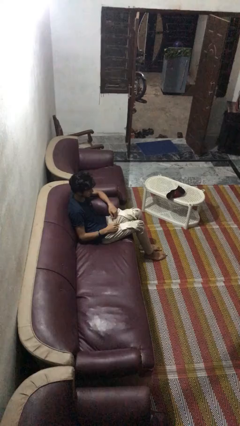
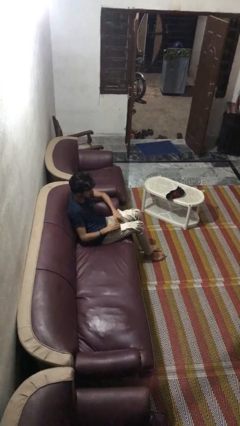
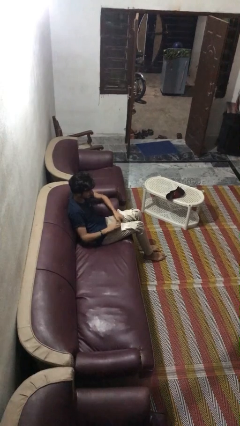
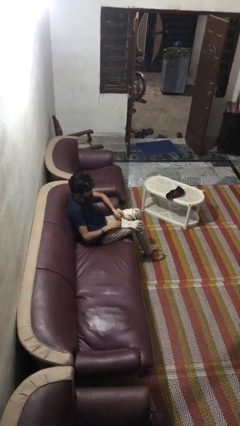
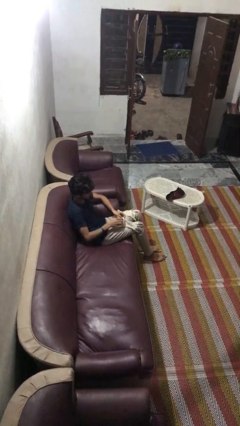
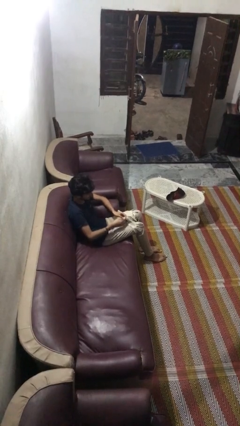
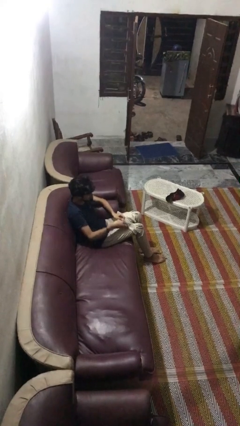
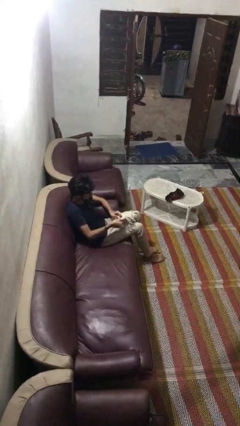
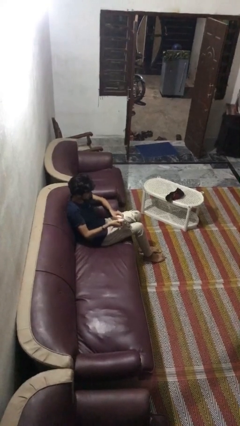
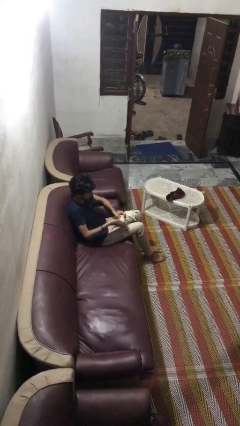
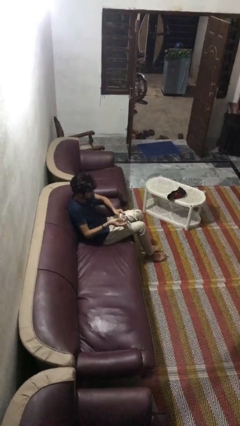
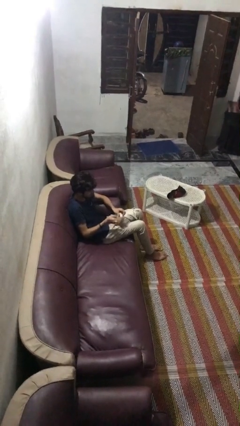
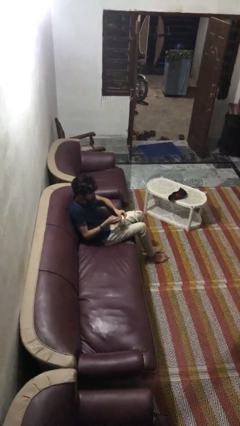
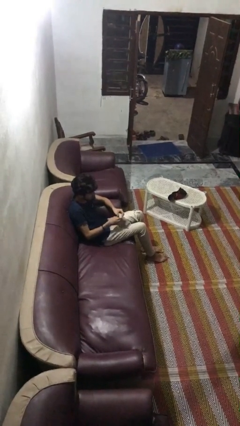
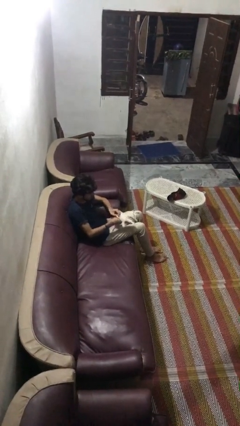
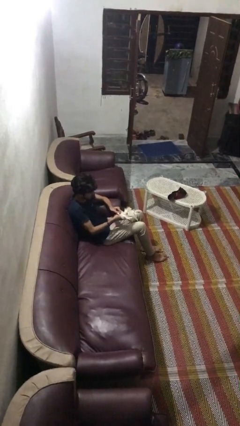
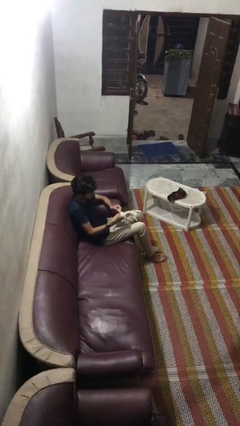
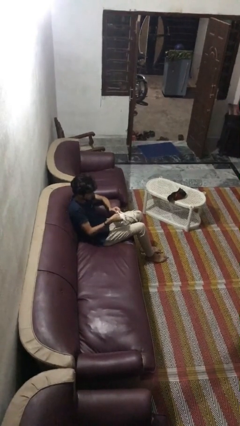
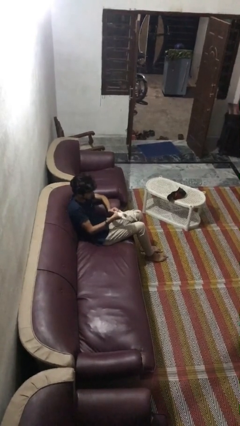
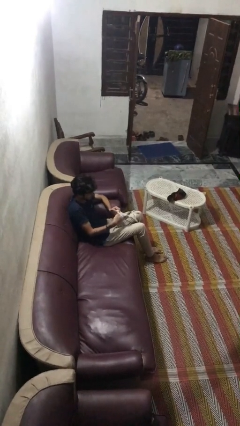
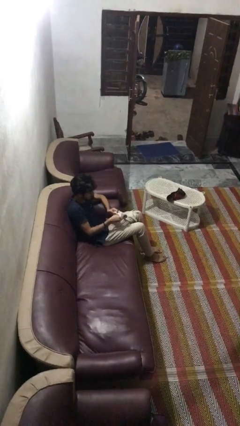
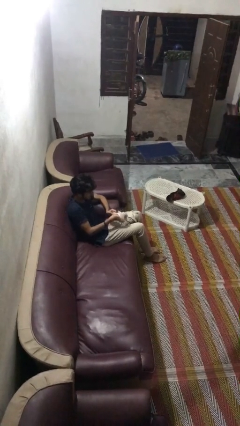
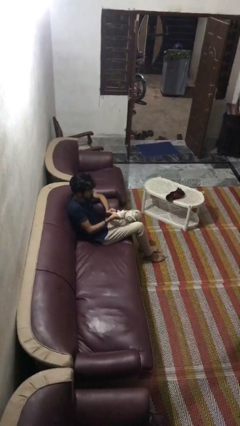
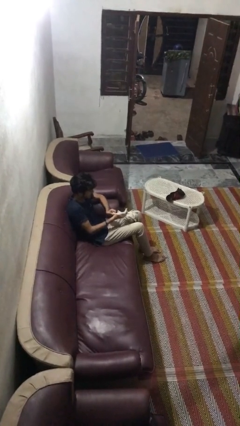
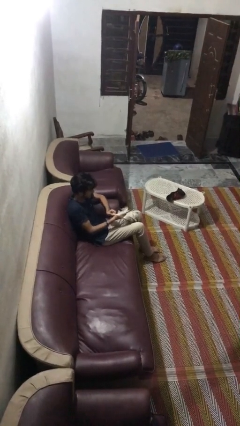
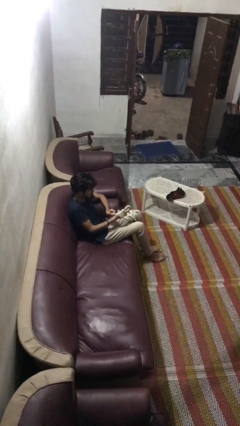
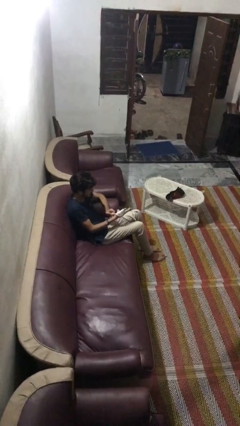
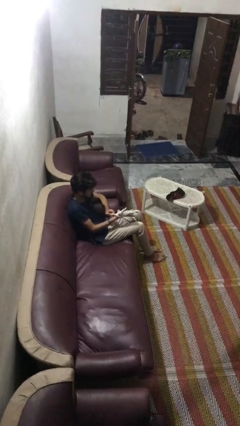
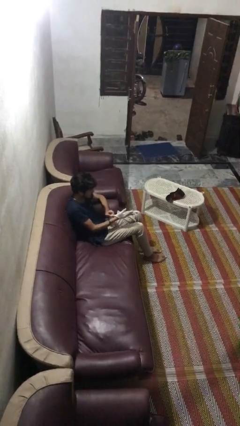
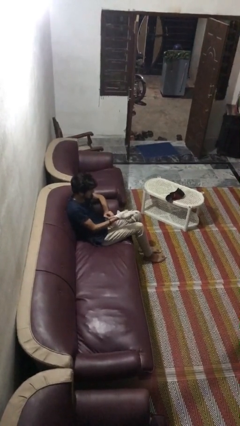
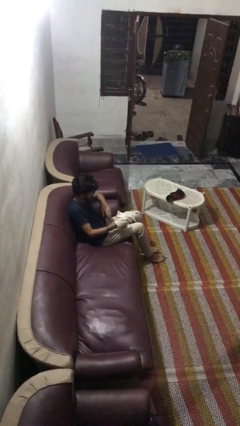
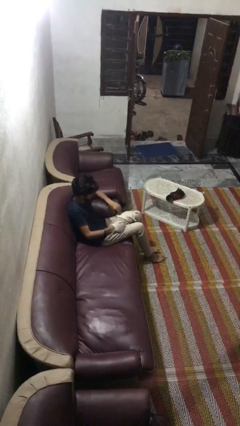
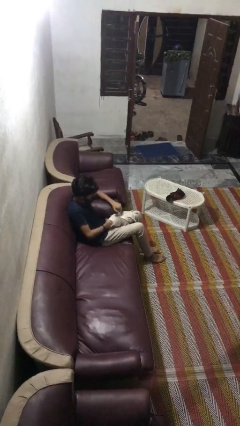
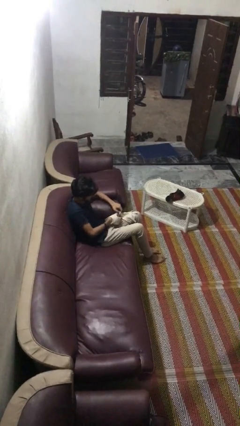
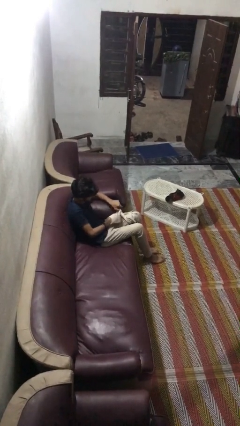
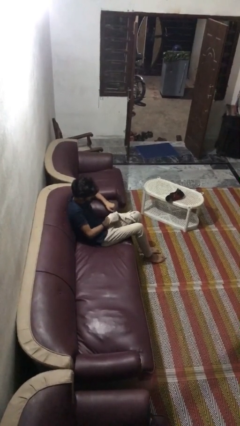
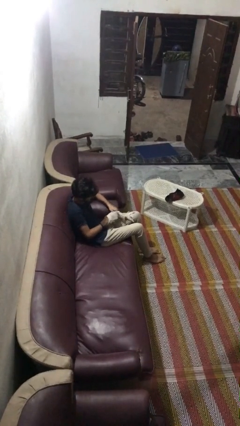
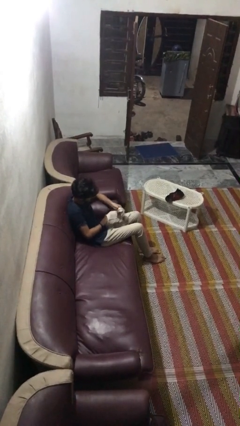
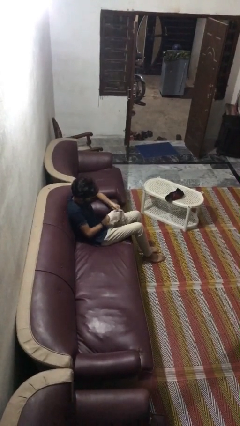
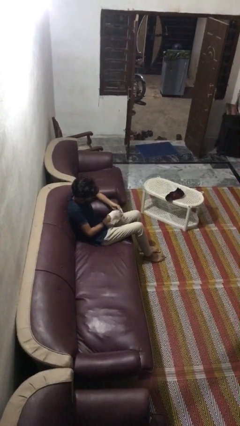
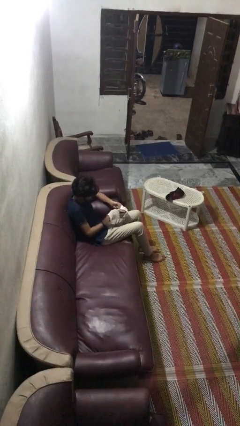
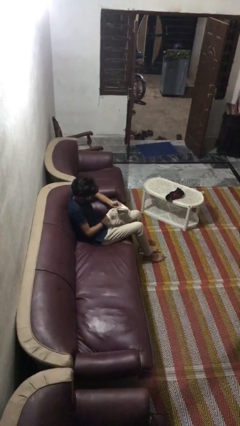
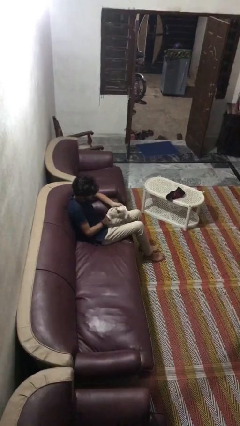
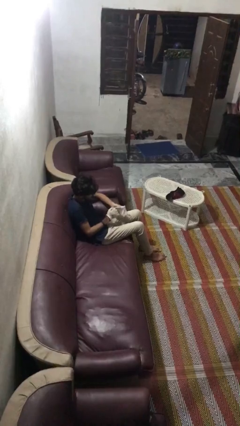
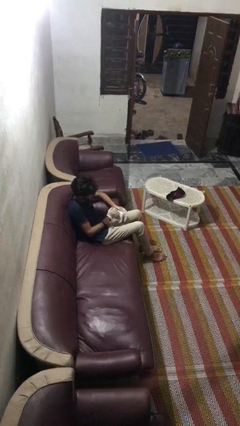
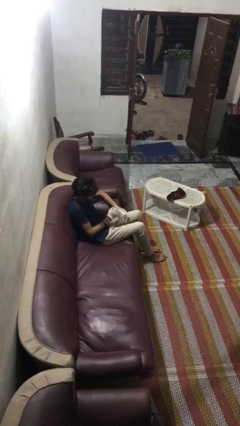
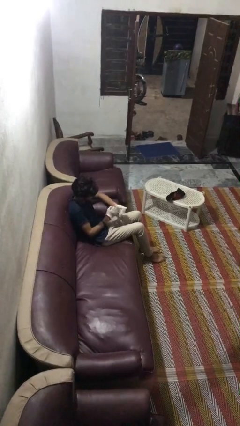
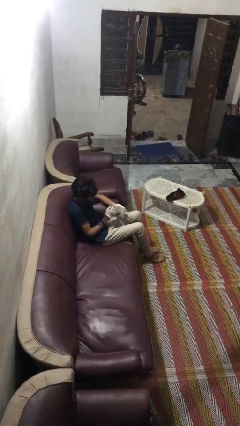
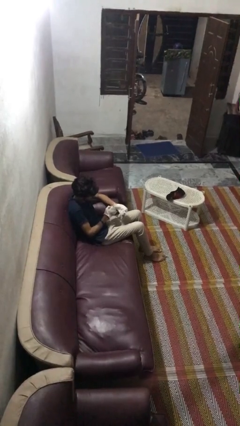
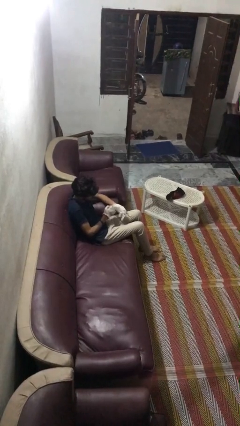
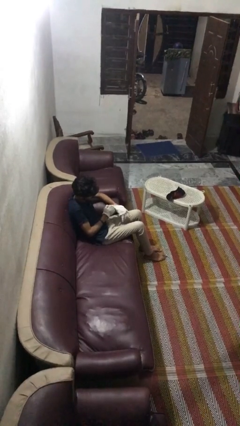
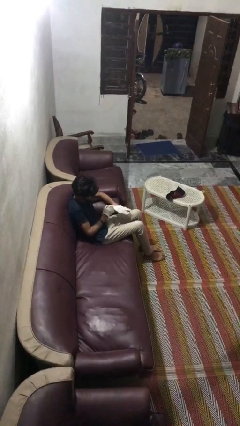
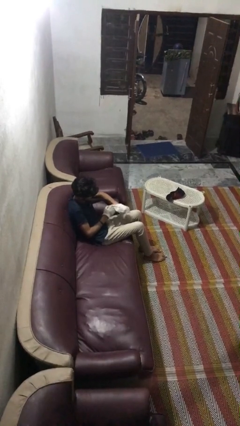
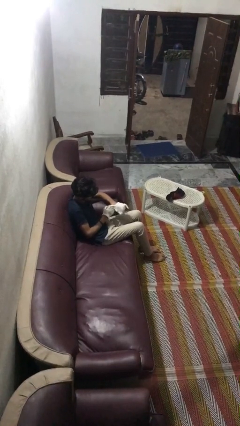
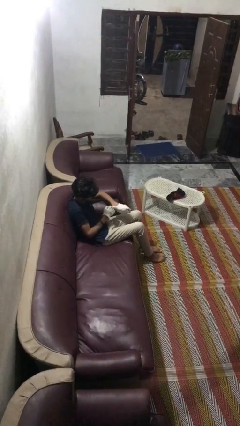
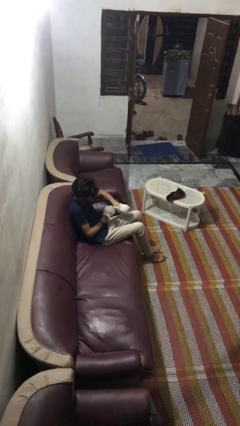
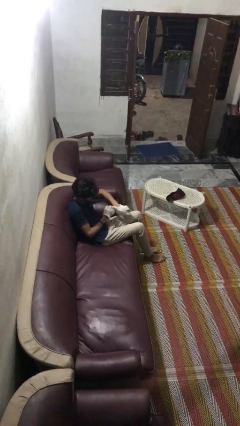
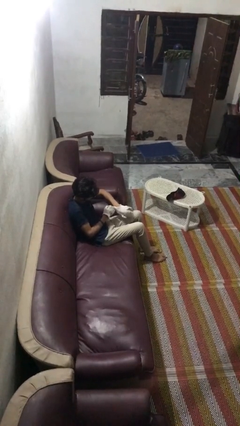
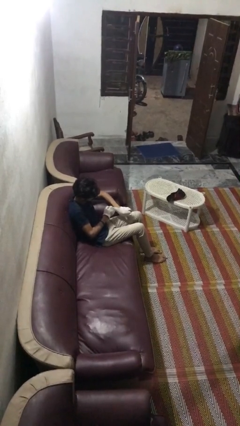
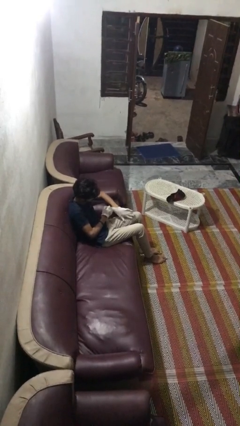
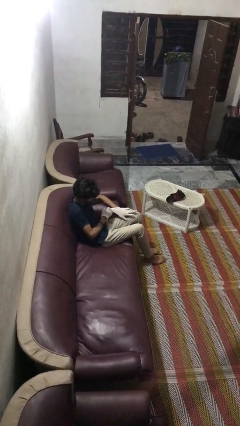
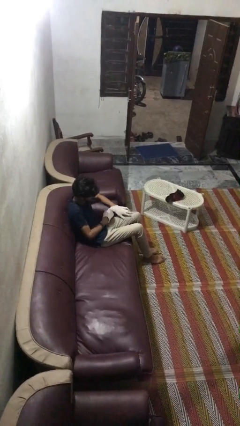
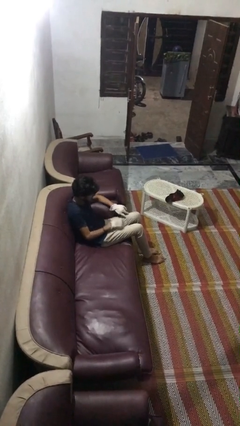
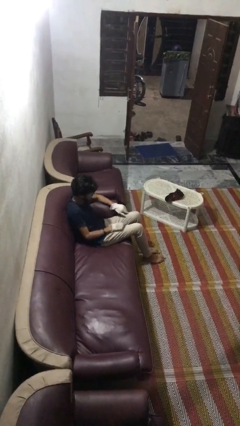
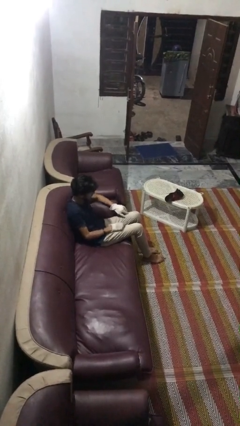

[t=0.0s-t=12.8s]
person puts on gloves

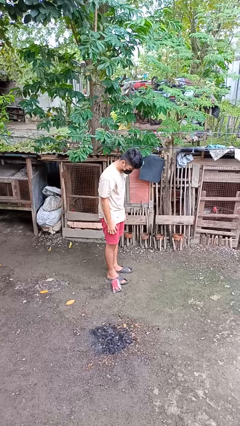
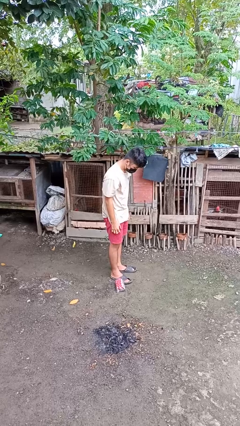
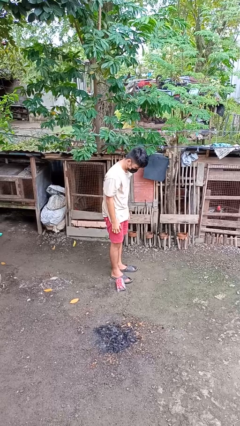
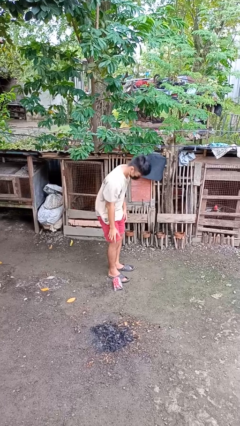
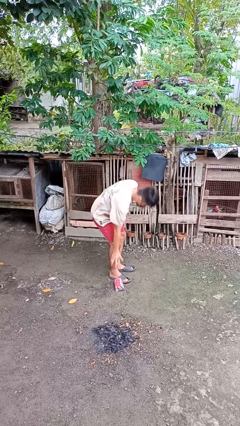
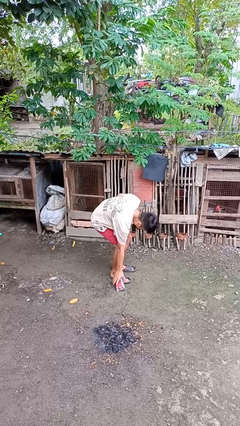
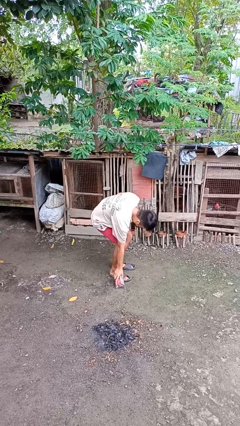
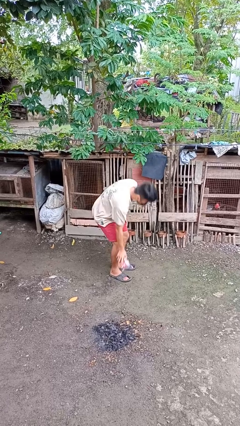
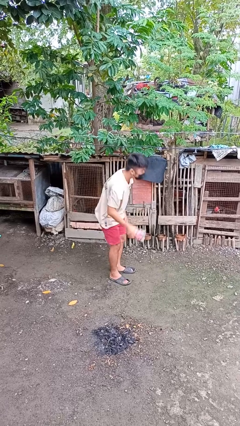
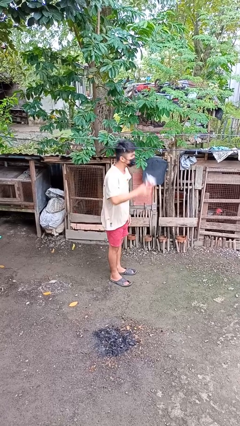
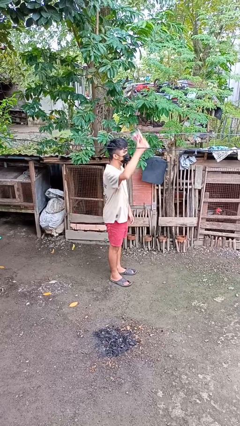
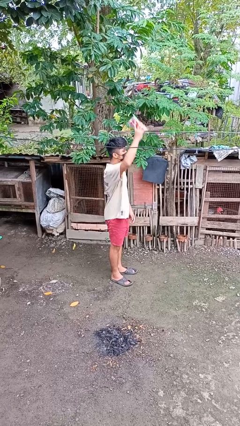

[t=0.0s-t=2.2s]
person picks up object from floor

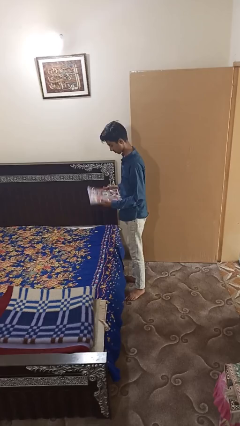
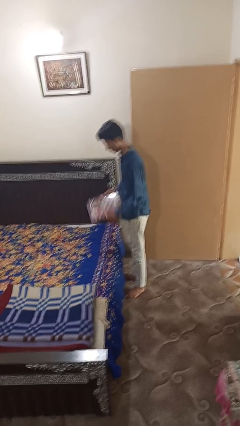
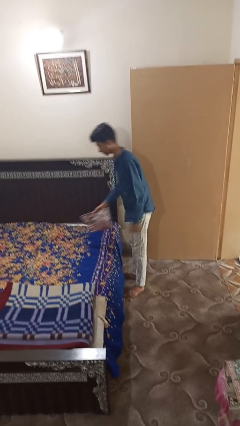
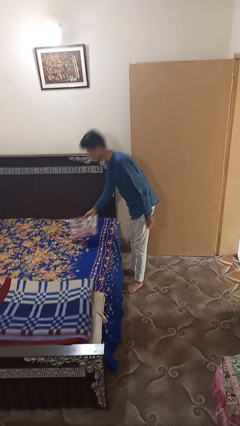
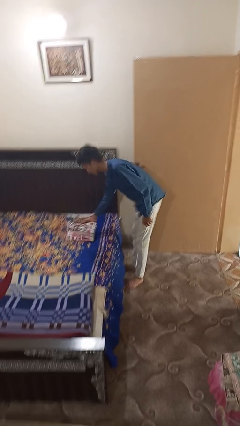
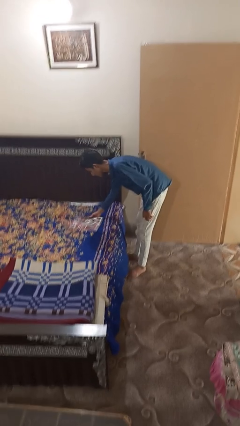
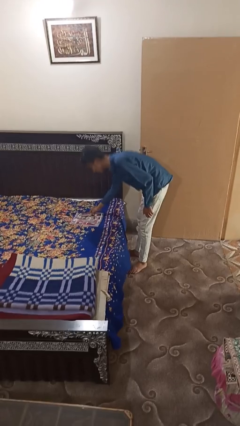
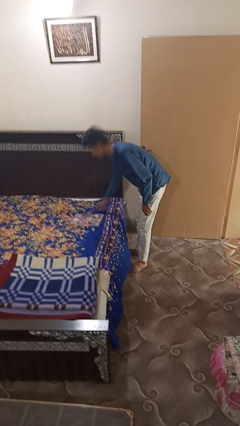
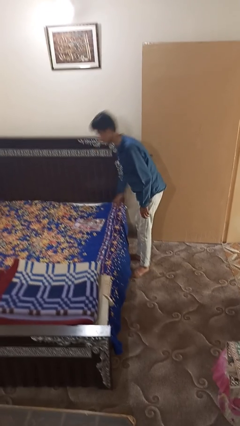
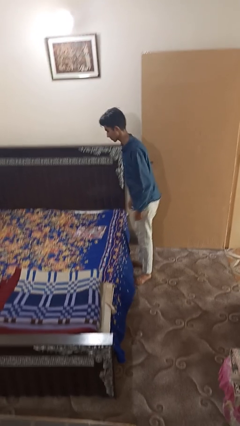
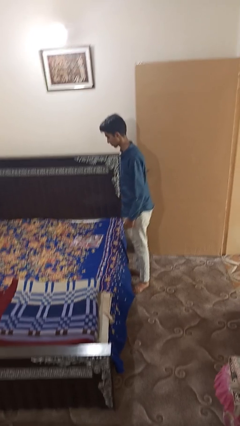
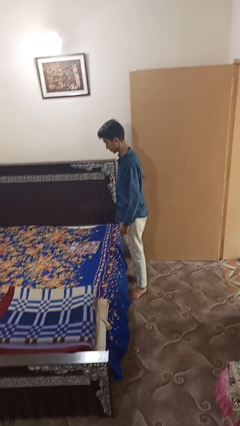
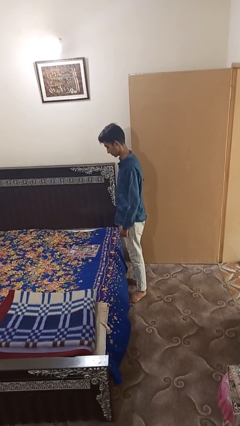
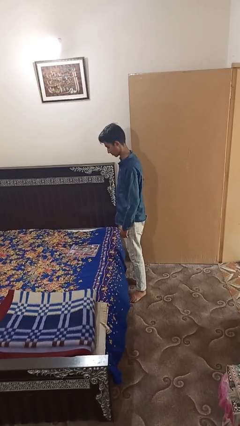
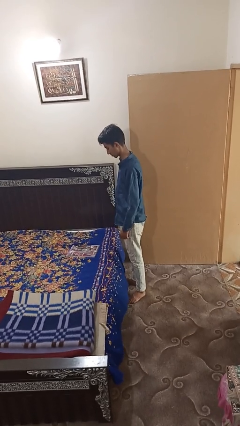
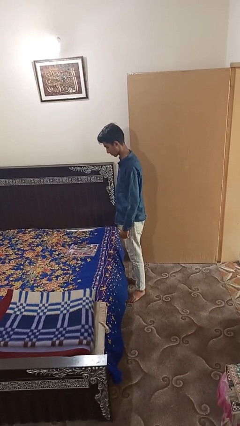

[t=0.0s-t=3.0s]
person puts down object on bed
